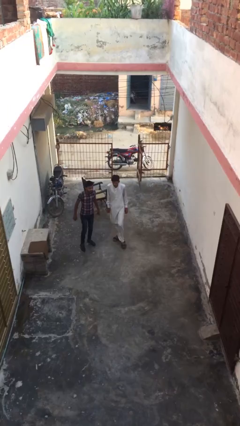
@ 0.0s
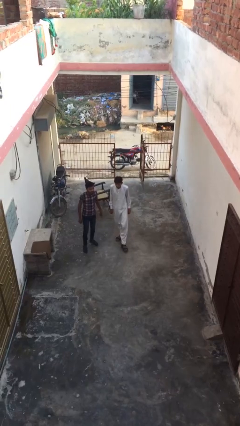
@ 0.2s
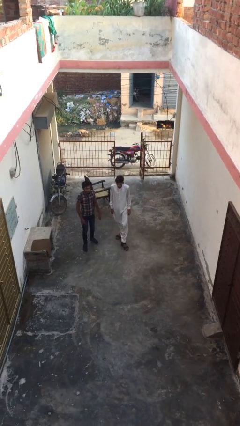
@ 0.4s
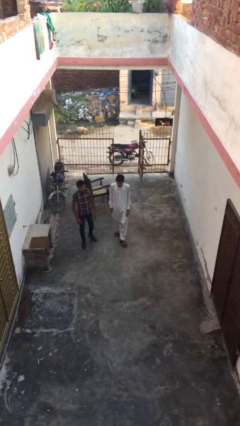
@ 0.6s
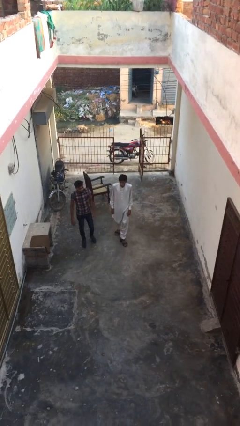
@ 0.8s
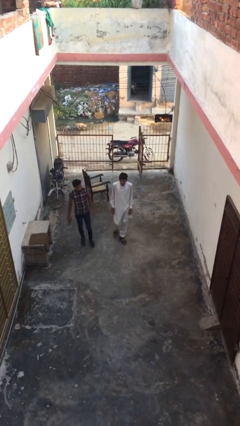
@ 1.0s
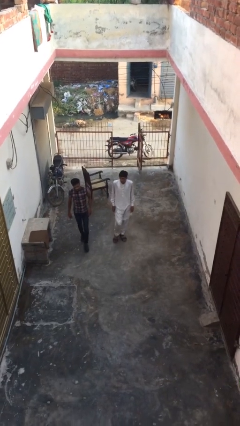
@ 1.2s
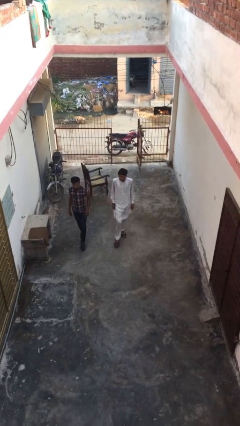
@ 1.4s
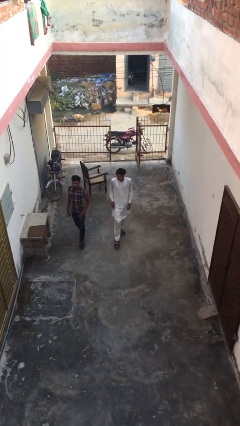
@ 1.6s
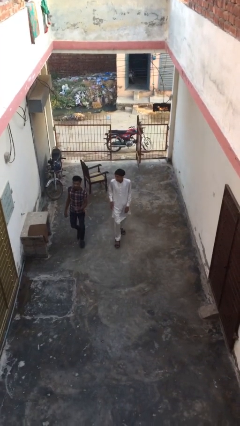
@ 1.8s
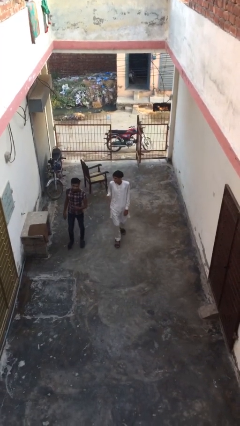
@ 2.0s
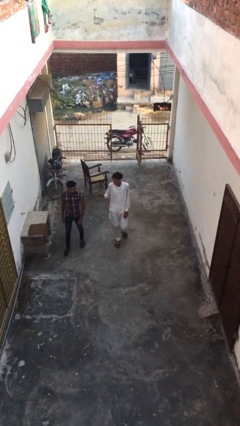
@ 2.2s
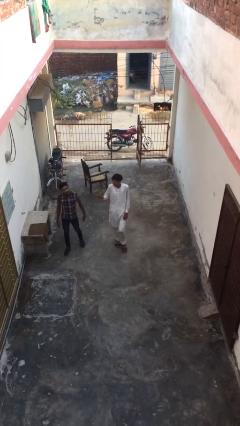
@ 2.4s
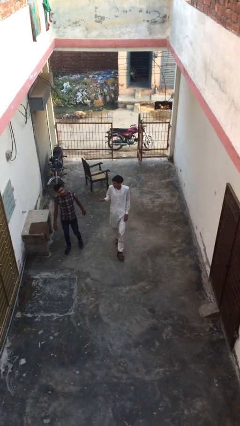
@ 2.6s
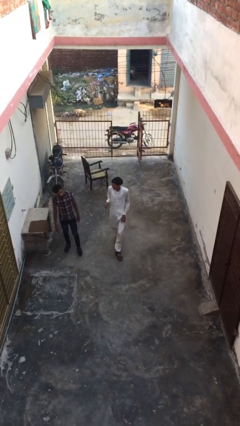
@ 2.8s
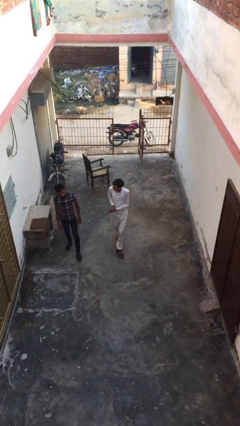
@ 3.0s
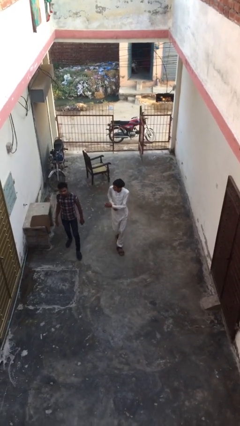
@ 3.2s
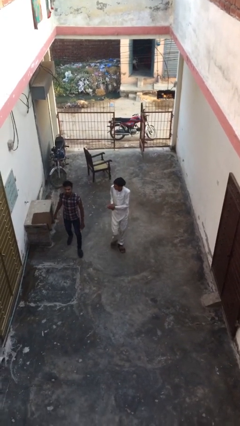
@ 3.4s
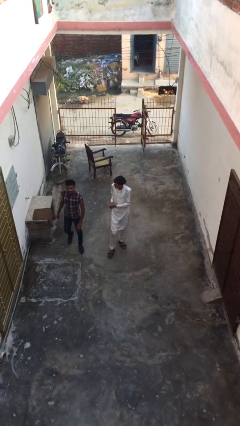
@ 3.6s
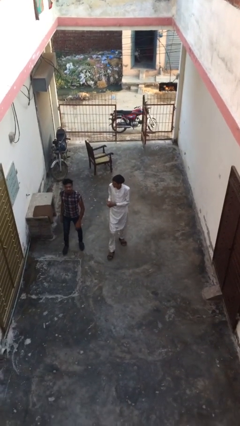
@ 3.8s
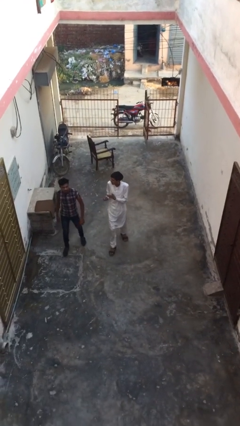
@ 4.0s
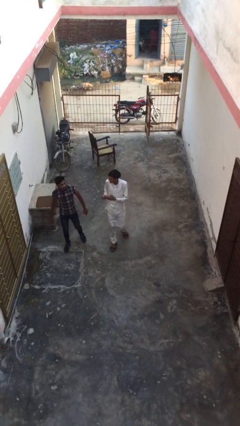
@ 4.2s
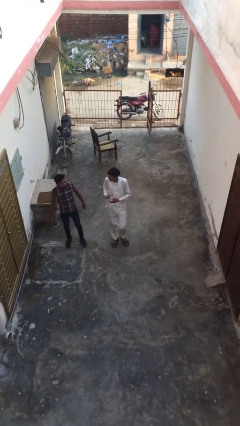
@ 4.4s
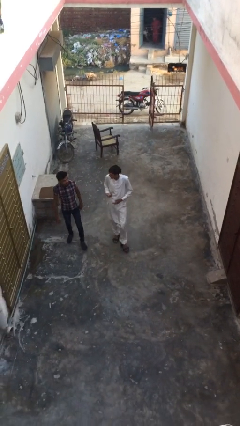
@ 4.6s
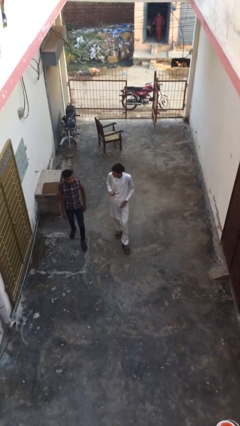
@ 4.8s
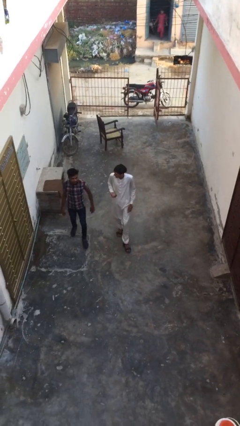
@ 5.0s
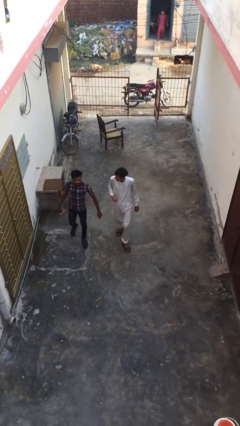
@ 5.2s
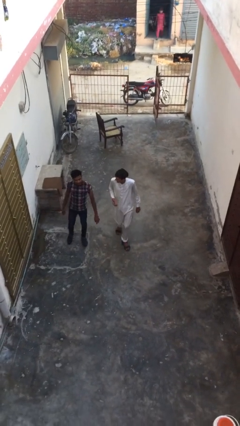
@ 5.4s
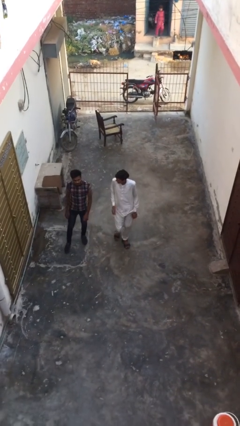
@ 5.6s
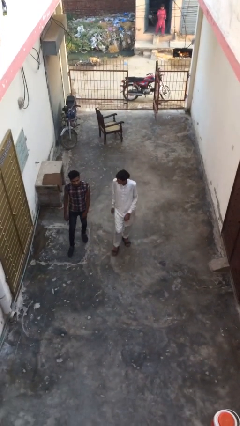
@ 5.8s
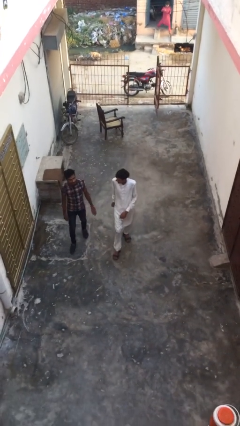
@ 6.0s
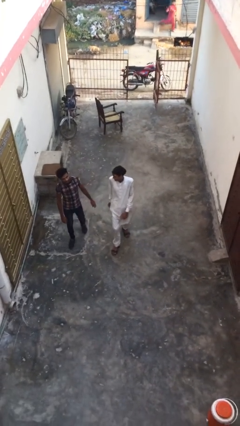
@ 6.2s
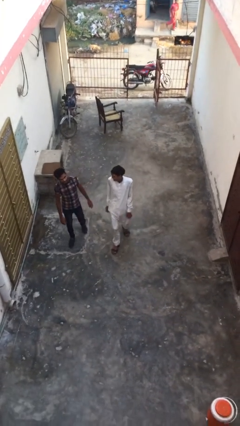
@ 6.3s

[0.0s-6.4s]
person talks to person

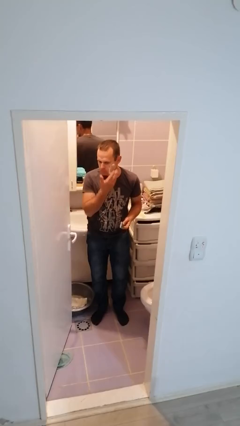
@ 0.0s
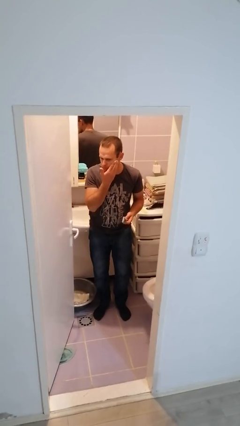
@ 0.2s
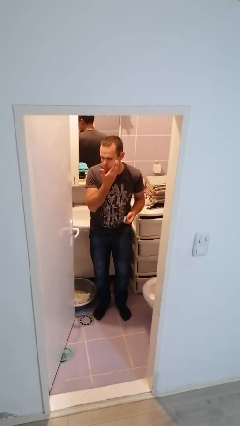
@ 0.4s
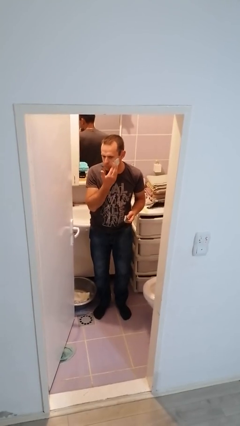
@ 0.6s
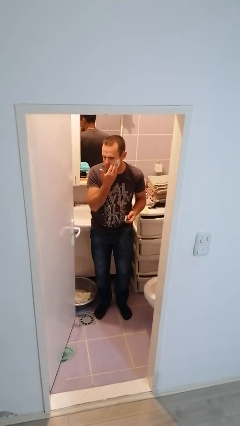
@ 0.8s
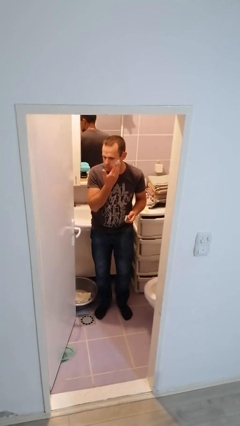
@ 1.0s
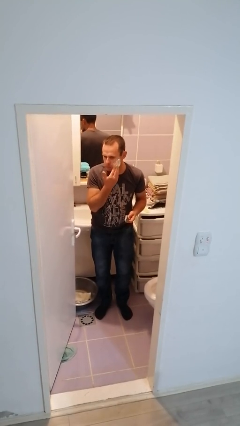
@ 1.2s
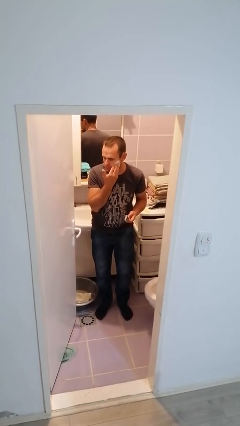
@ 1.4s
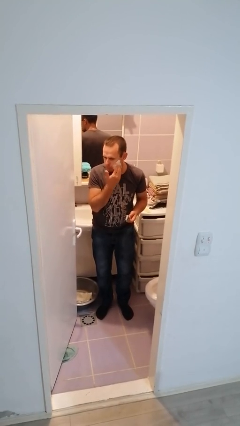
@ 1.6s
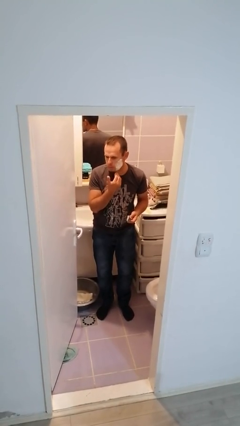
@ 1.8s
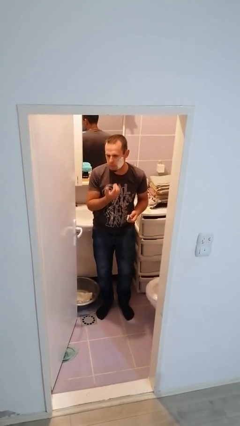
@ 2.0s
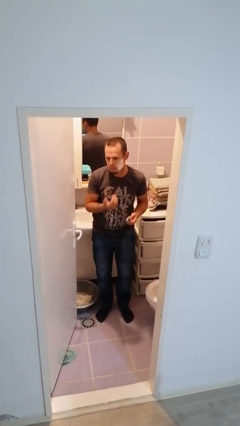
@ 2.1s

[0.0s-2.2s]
person applies shaving cream

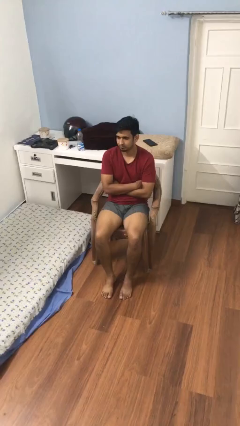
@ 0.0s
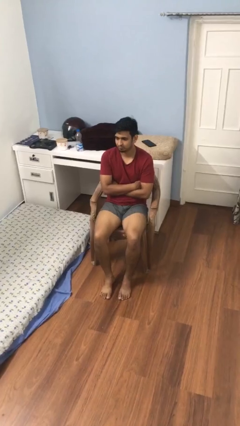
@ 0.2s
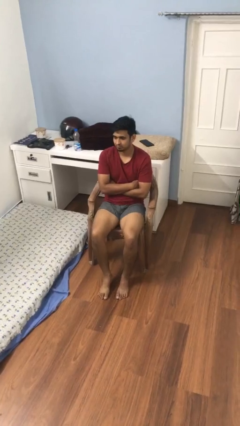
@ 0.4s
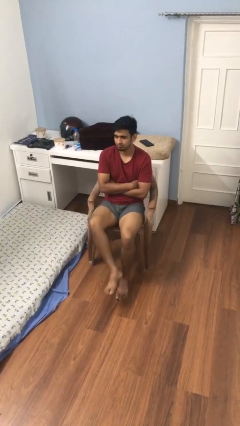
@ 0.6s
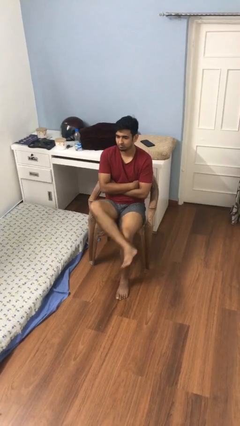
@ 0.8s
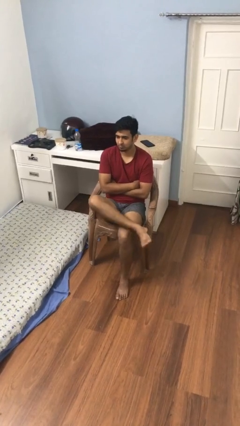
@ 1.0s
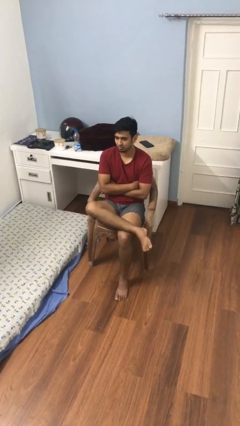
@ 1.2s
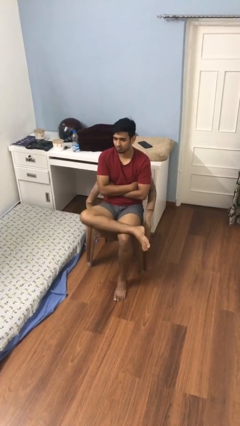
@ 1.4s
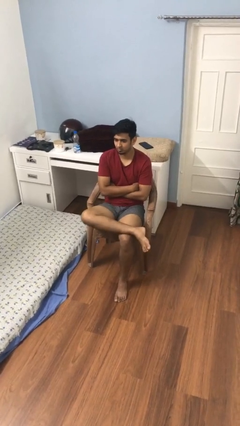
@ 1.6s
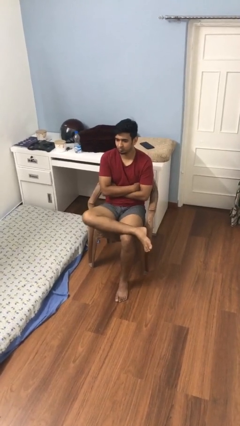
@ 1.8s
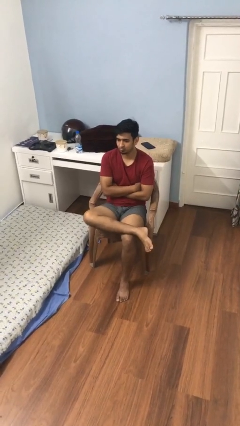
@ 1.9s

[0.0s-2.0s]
person crosses legs

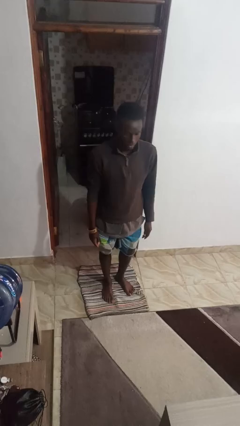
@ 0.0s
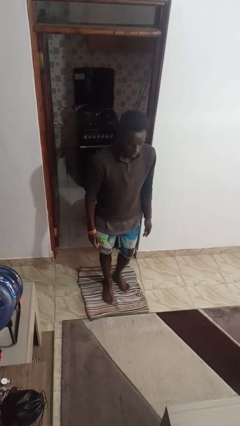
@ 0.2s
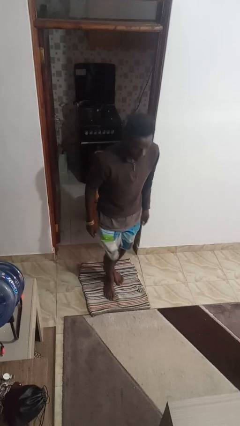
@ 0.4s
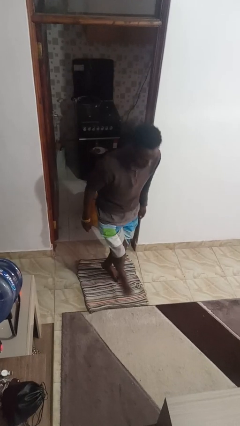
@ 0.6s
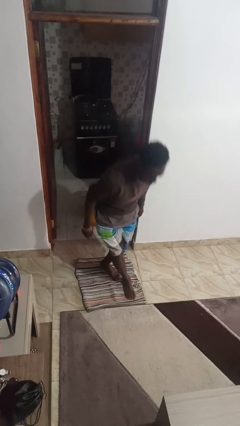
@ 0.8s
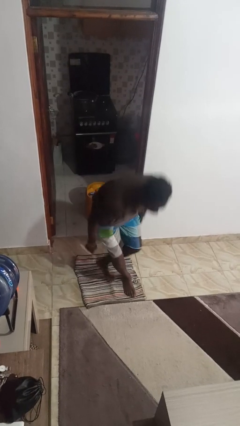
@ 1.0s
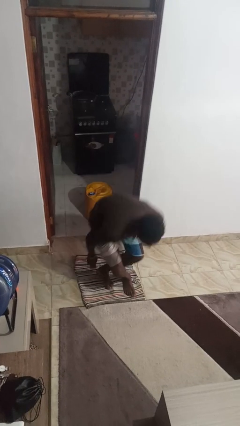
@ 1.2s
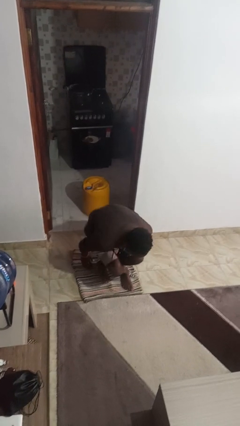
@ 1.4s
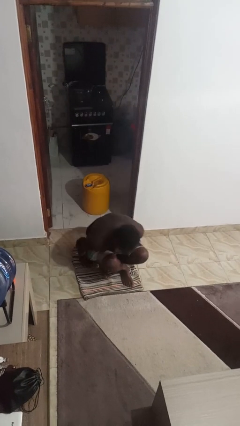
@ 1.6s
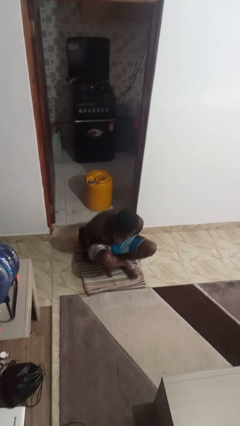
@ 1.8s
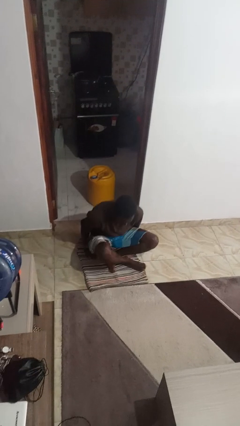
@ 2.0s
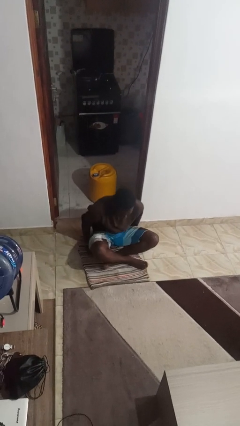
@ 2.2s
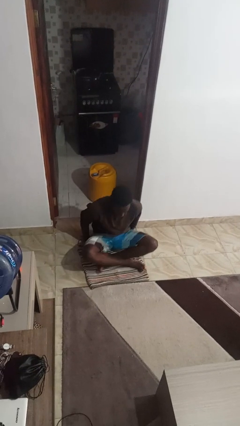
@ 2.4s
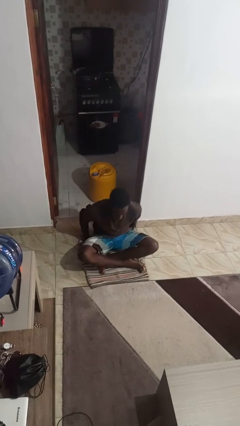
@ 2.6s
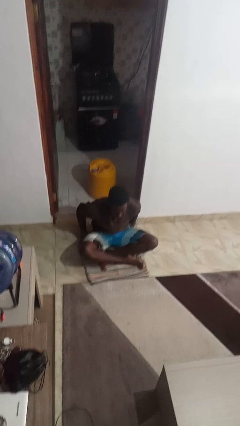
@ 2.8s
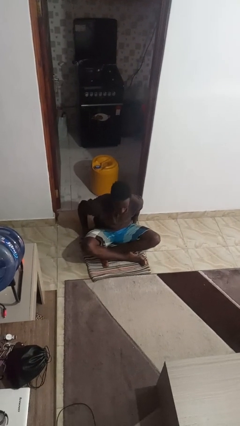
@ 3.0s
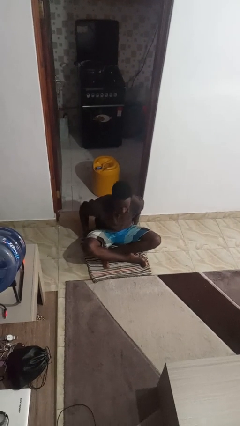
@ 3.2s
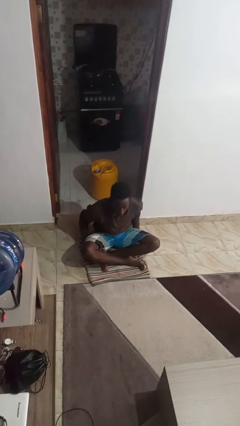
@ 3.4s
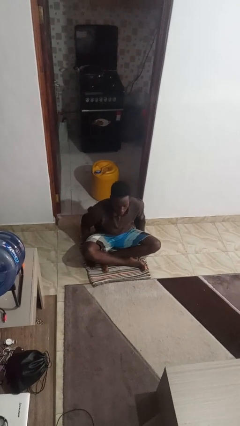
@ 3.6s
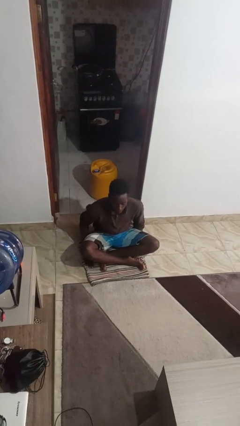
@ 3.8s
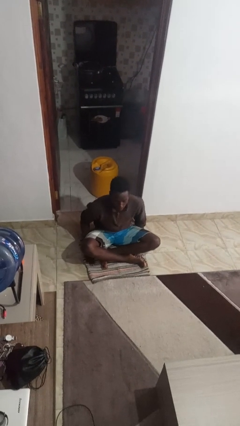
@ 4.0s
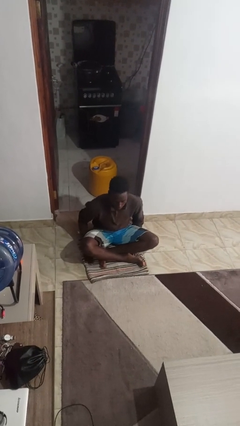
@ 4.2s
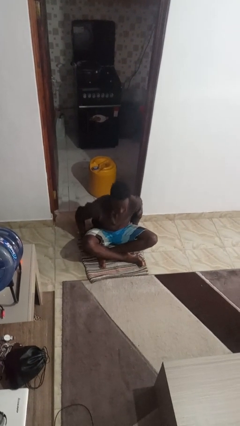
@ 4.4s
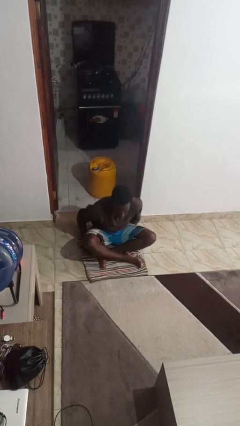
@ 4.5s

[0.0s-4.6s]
person sits crisscross

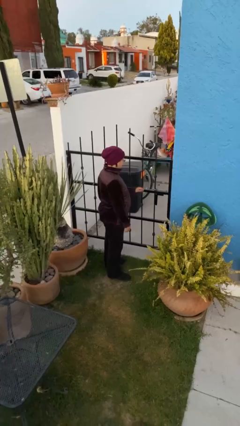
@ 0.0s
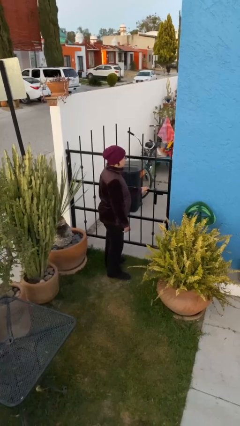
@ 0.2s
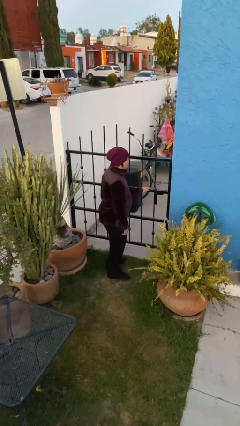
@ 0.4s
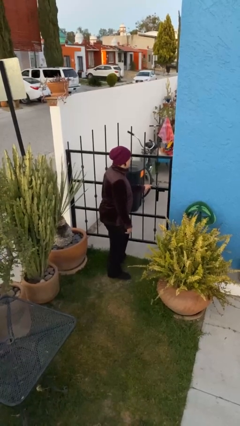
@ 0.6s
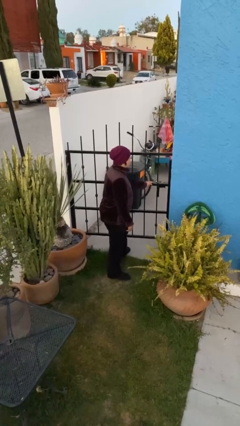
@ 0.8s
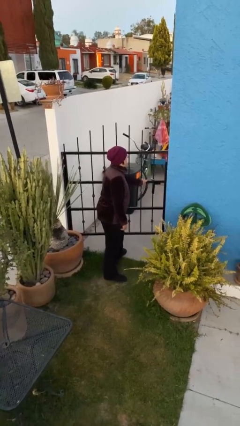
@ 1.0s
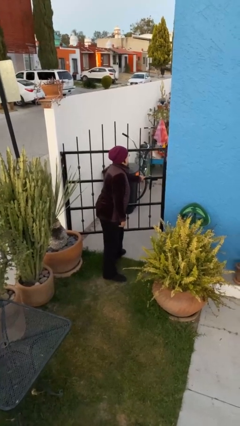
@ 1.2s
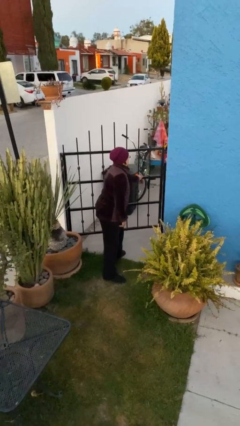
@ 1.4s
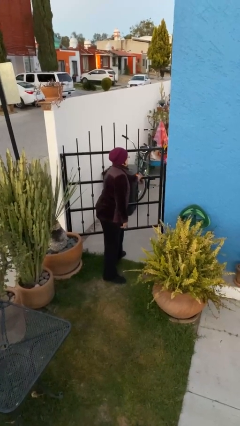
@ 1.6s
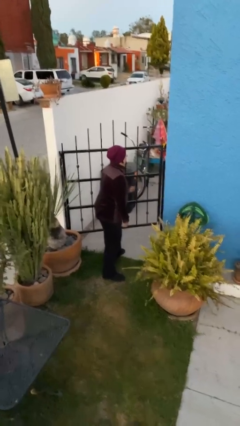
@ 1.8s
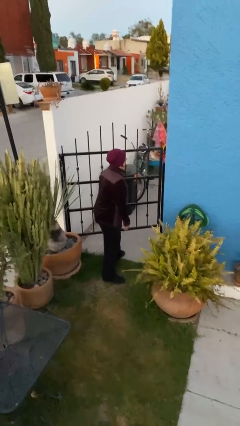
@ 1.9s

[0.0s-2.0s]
person opens facility door

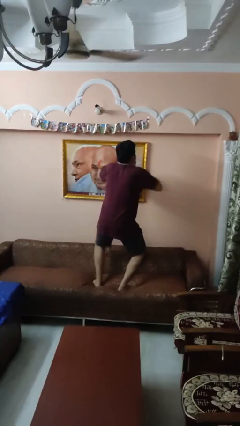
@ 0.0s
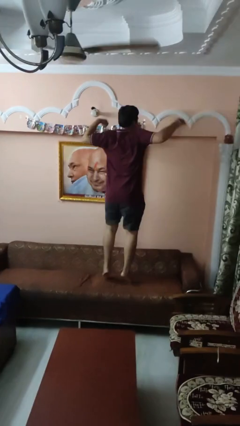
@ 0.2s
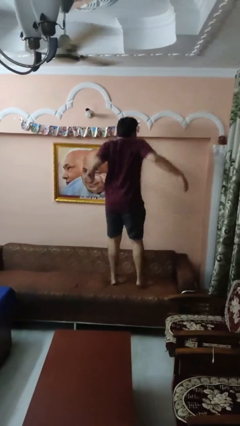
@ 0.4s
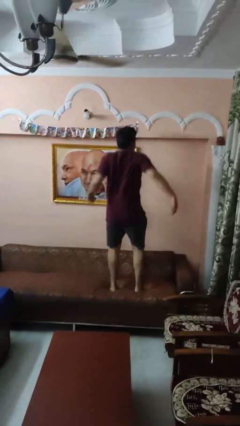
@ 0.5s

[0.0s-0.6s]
person jumps on couch
